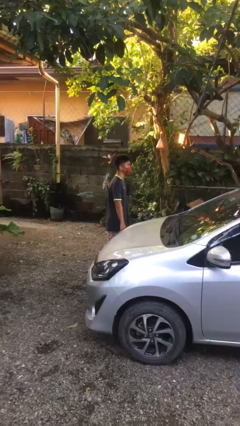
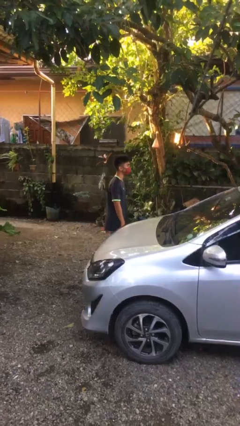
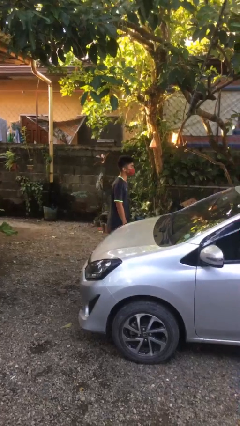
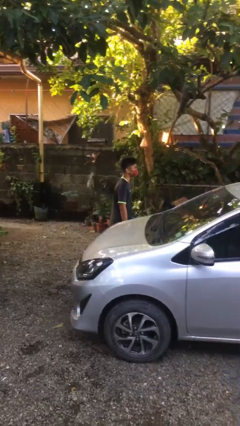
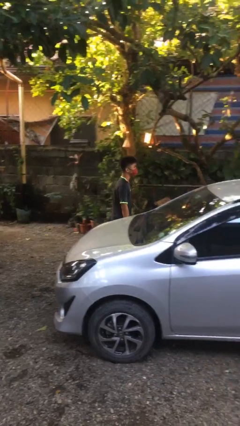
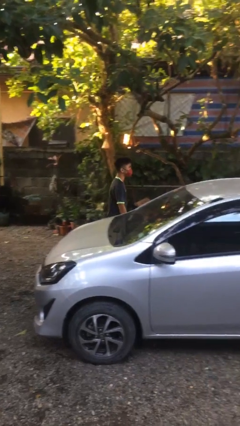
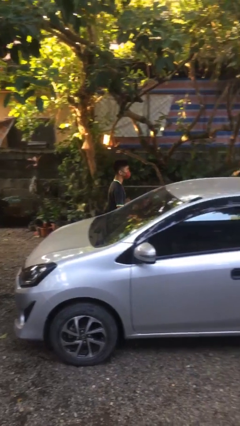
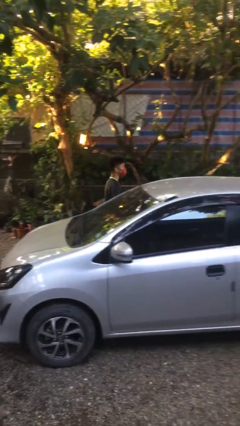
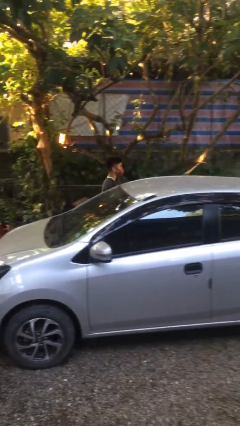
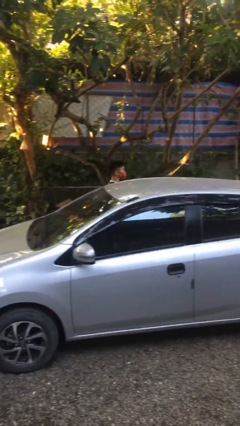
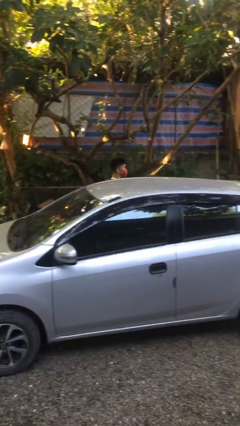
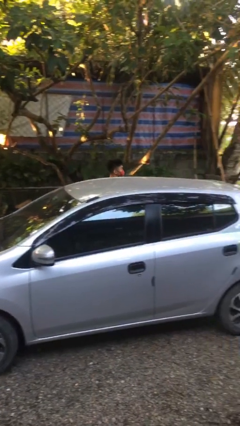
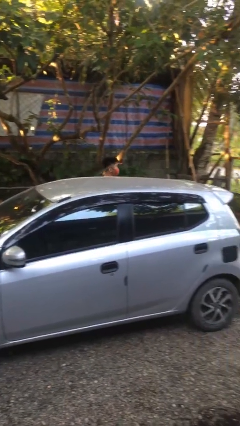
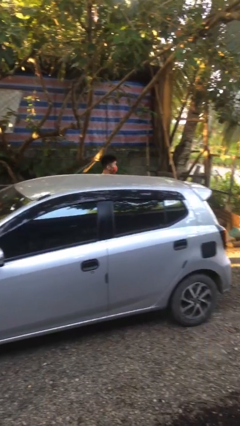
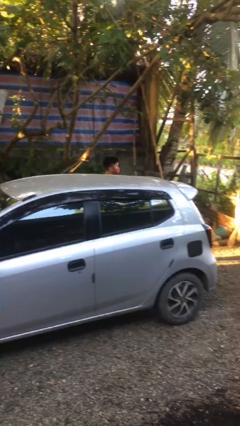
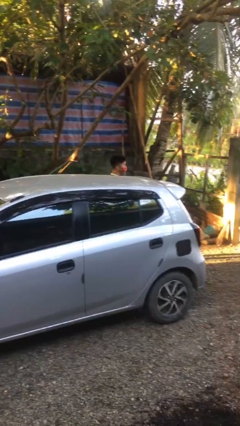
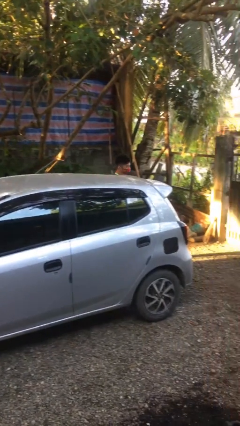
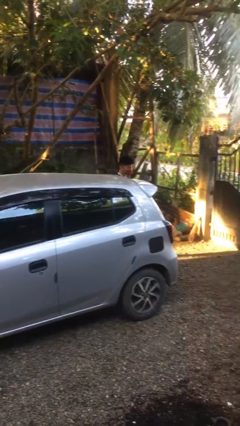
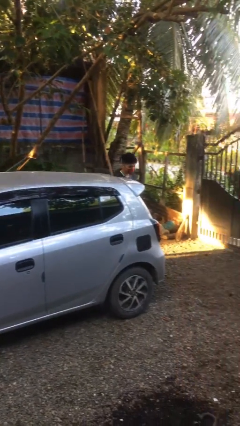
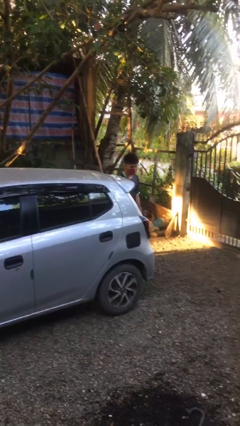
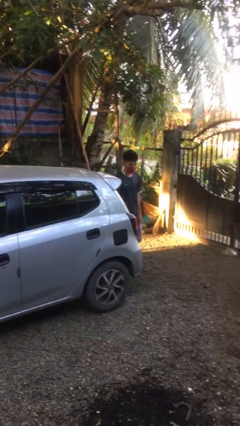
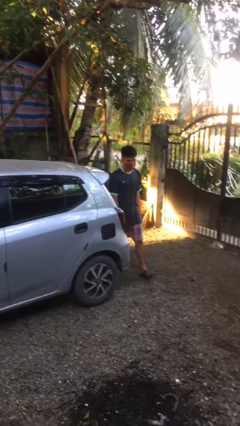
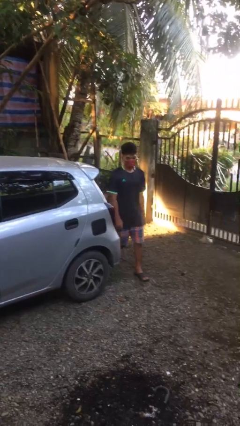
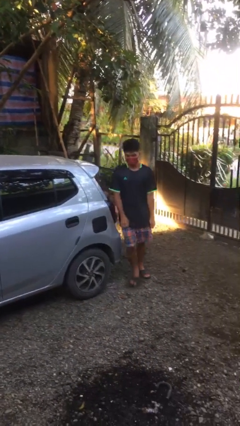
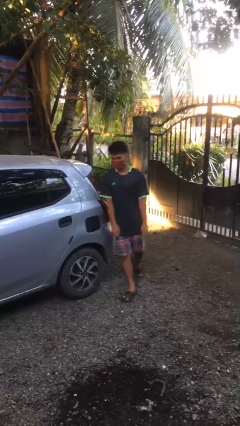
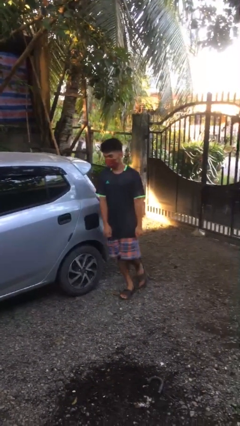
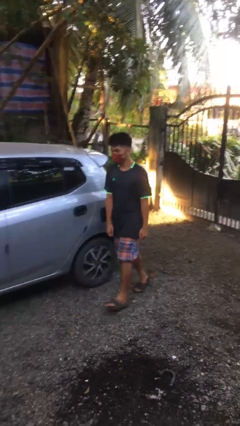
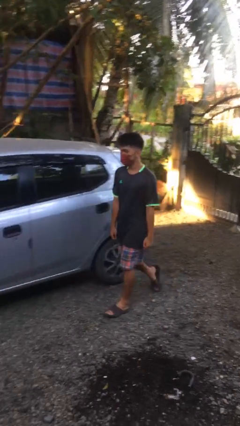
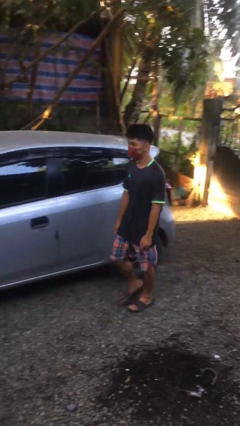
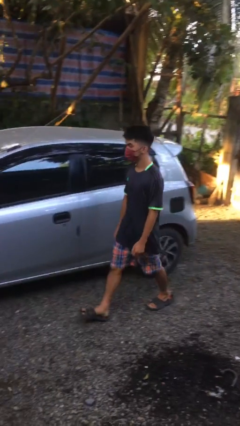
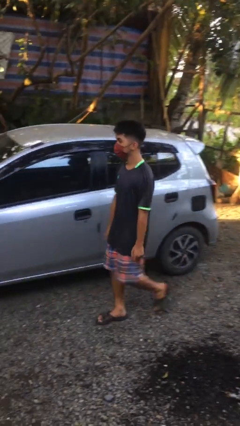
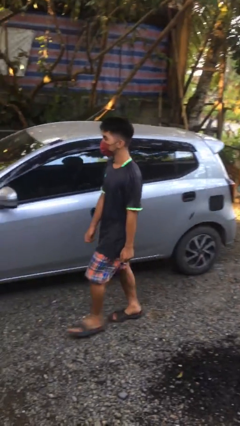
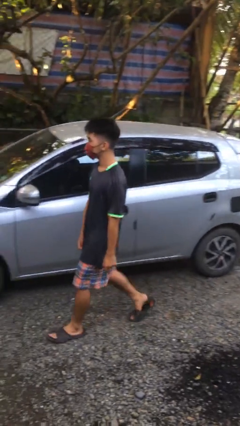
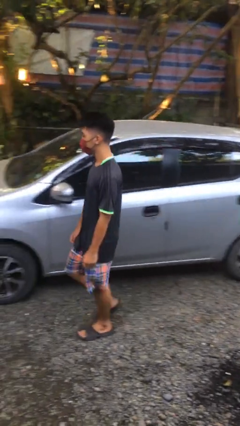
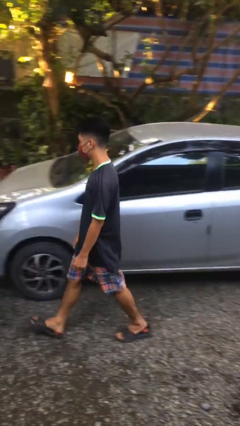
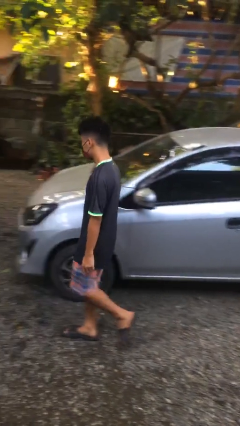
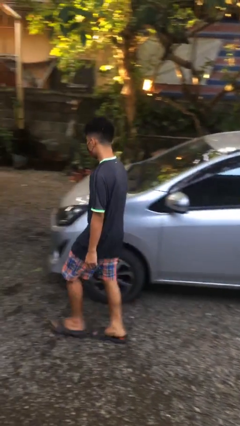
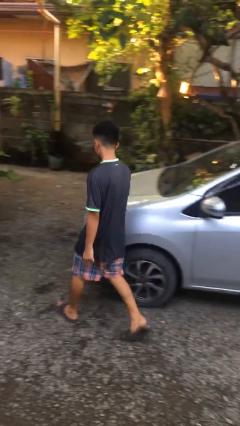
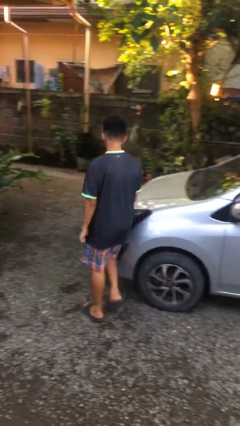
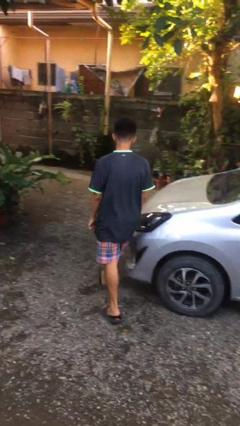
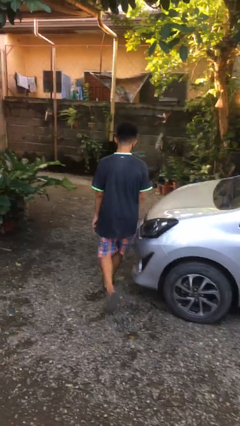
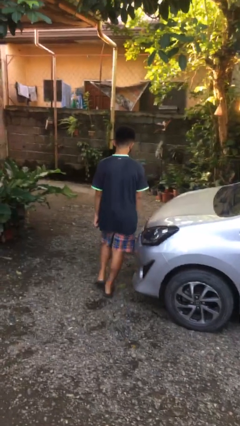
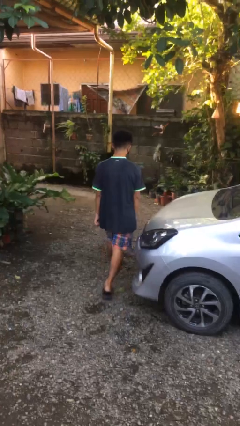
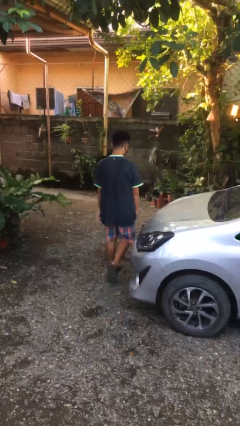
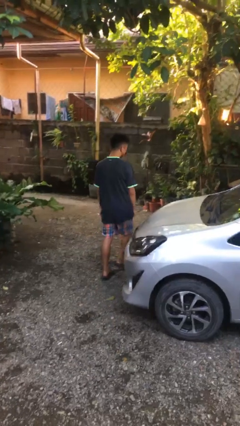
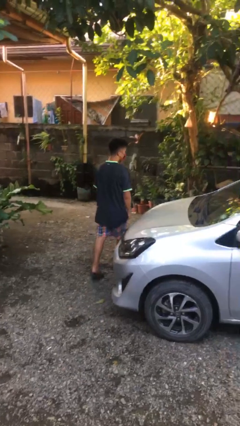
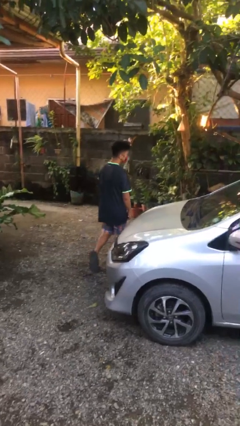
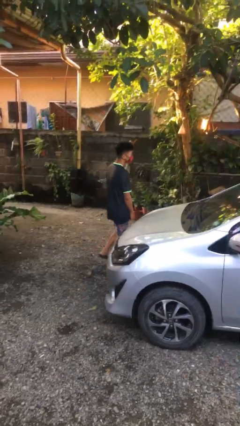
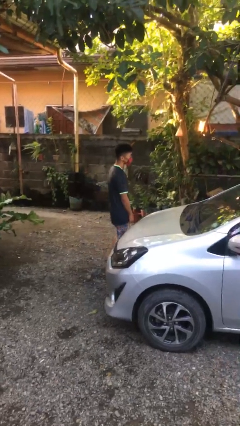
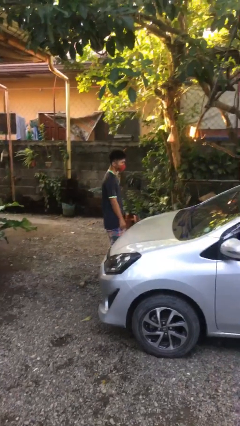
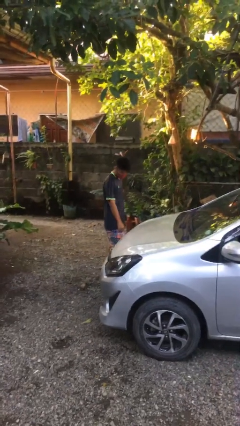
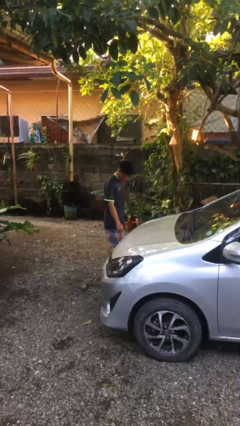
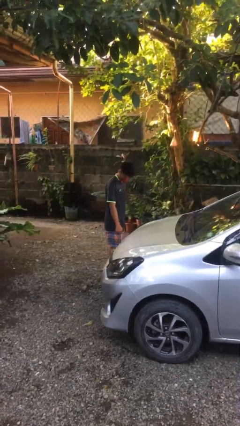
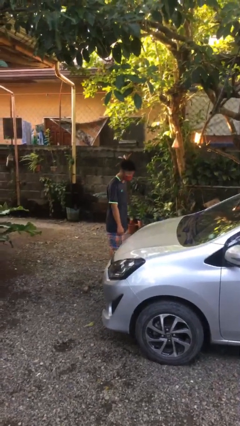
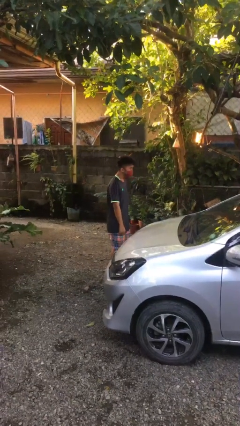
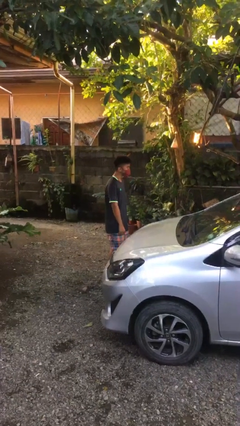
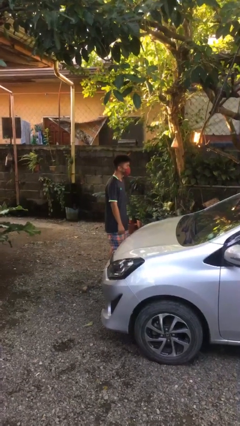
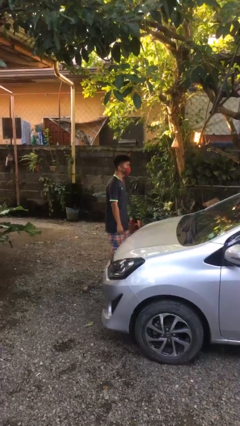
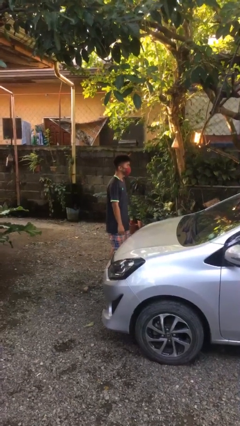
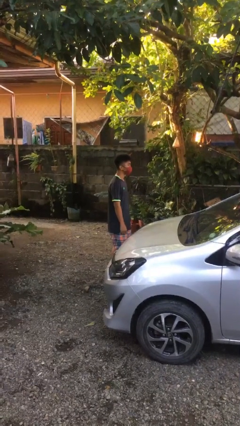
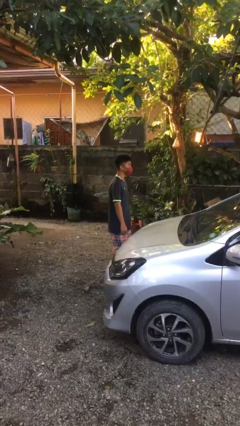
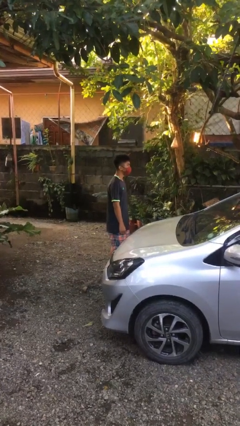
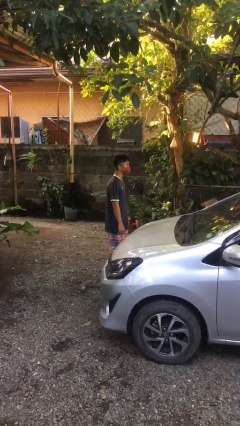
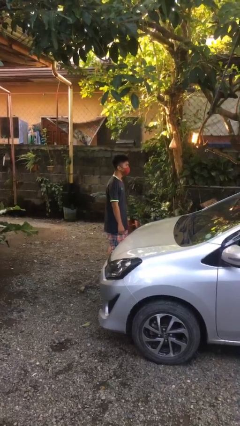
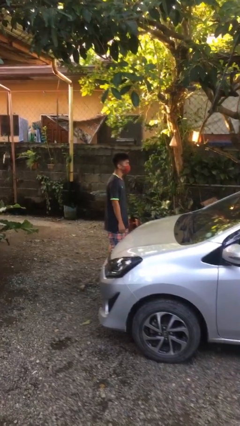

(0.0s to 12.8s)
person walks around car

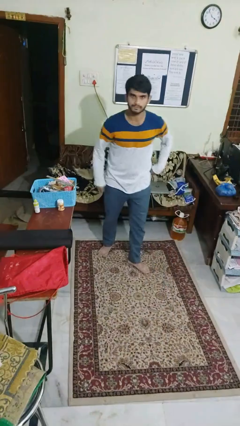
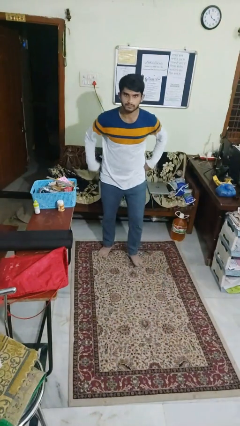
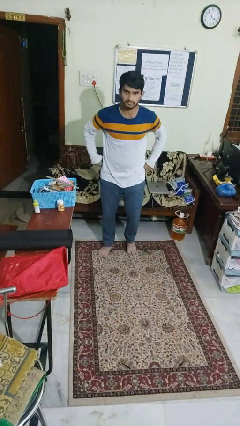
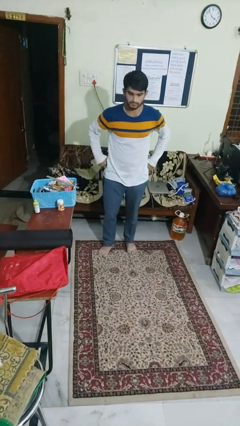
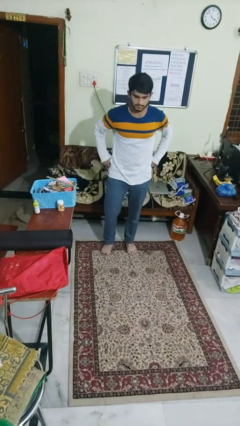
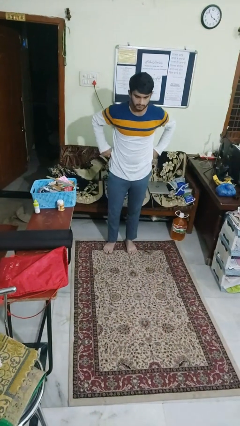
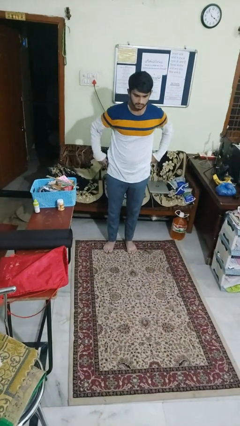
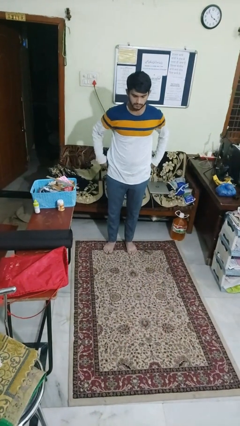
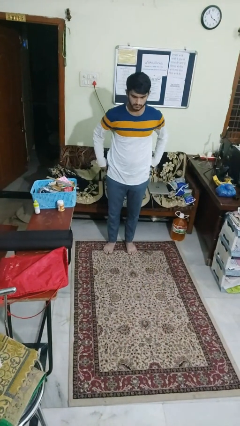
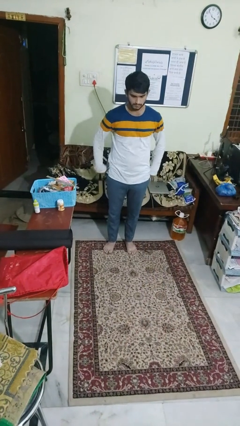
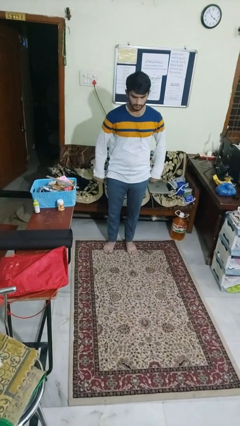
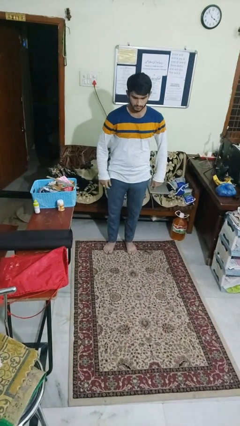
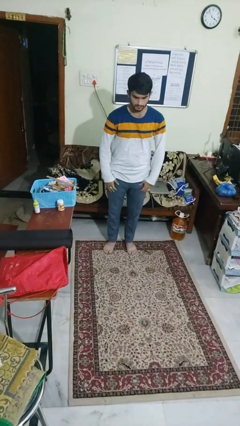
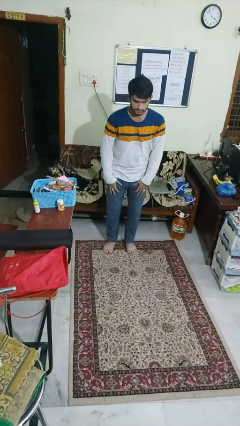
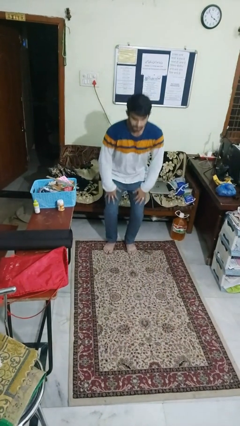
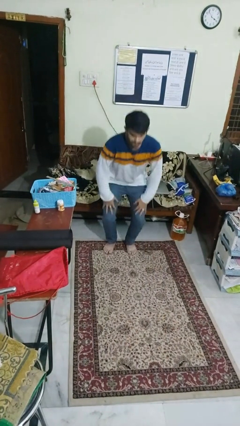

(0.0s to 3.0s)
person stands up from floor

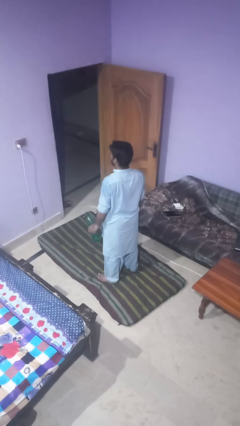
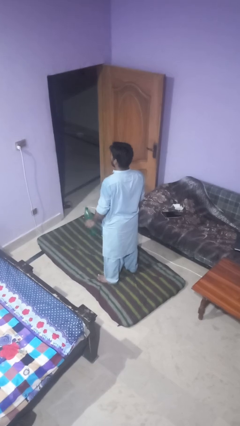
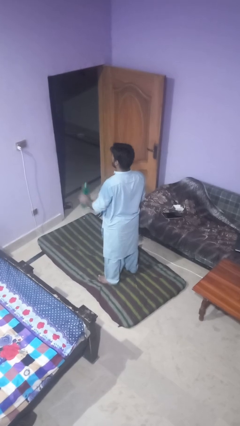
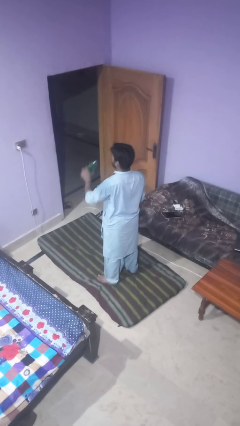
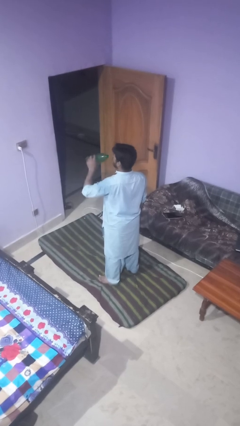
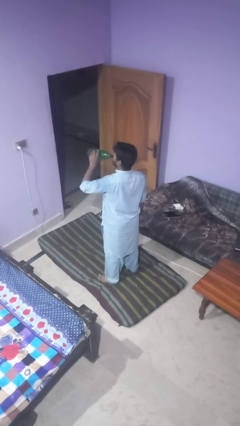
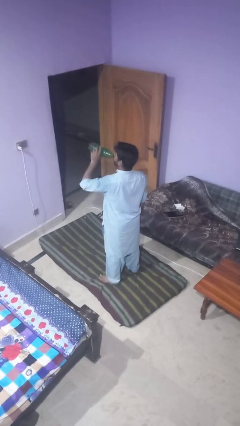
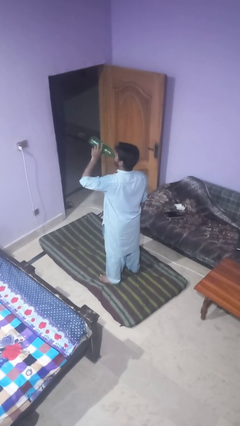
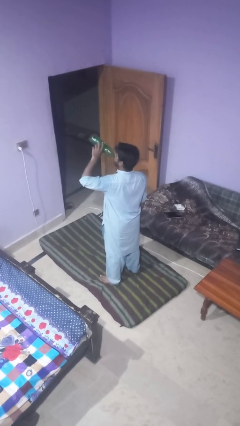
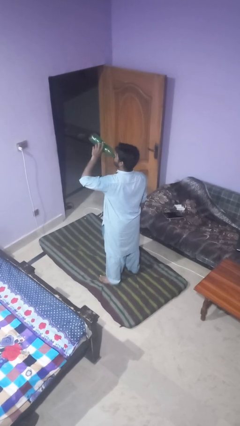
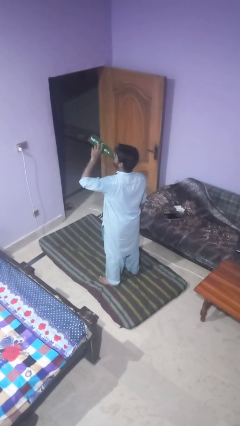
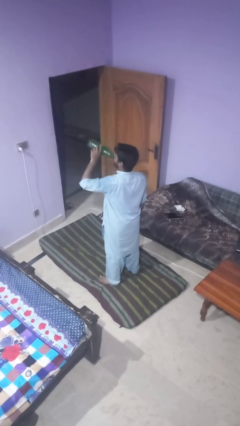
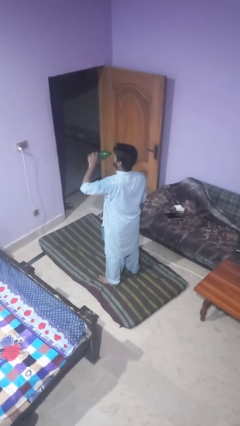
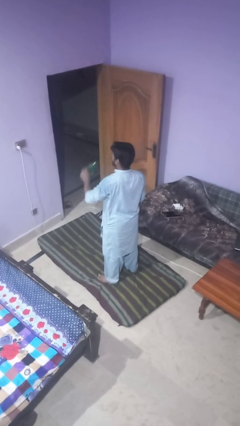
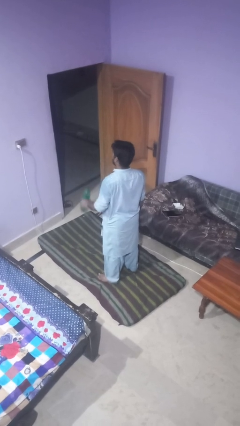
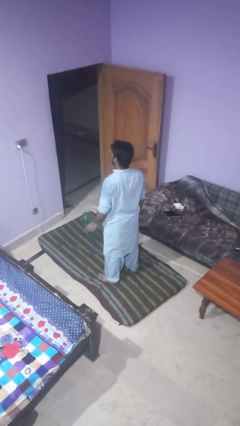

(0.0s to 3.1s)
person drinks from bottle
